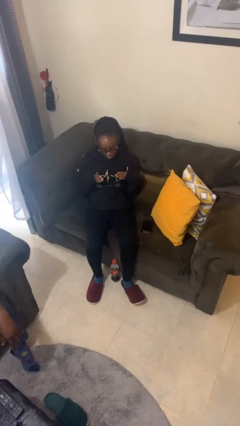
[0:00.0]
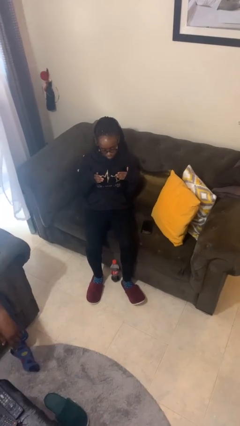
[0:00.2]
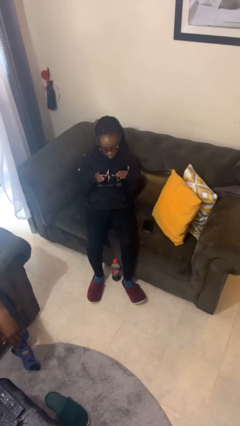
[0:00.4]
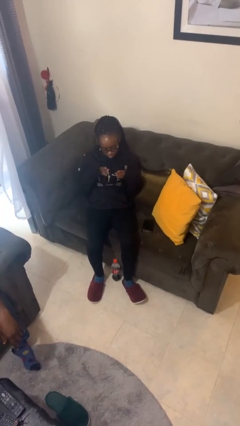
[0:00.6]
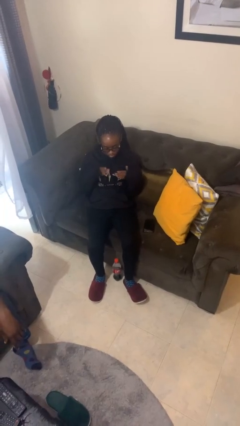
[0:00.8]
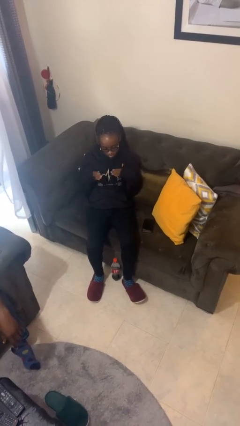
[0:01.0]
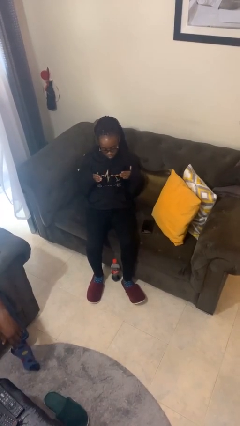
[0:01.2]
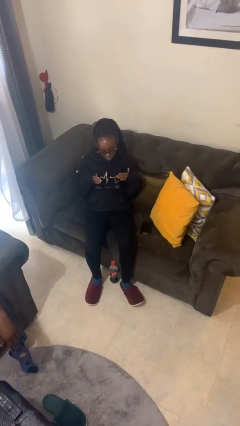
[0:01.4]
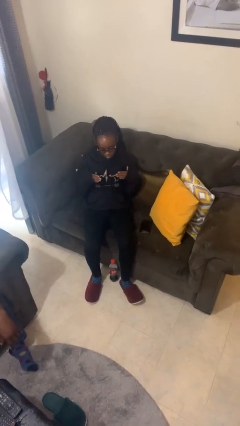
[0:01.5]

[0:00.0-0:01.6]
person drums on chest

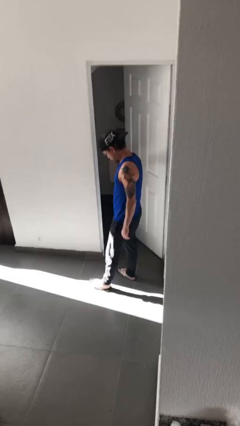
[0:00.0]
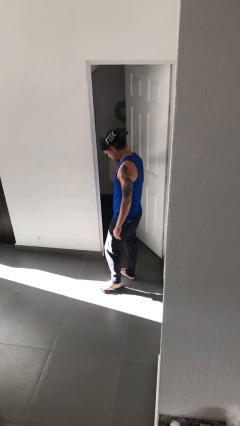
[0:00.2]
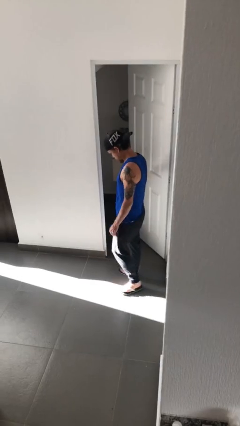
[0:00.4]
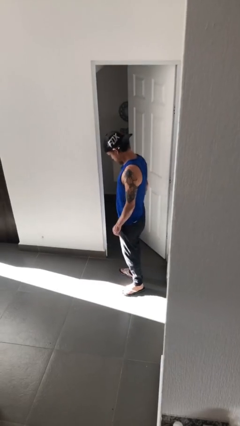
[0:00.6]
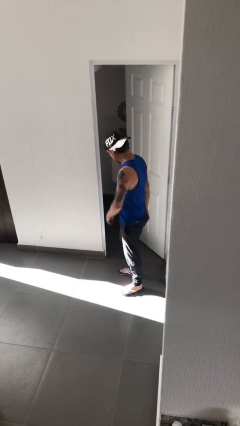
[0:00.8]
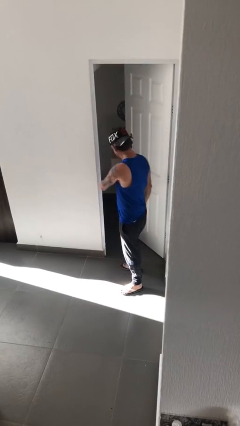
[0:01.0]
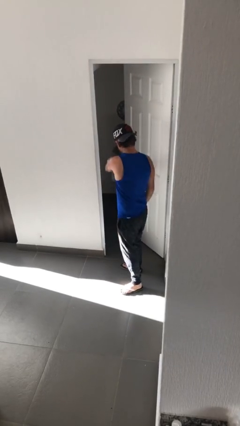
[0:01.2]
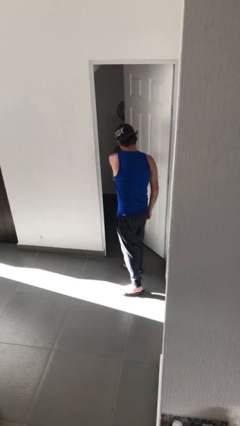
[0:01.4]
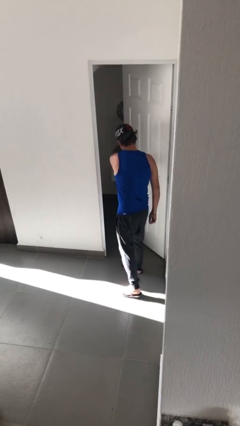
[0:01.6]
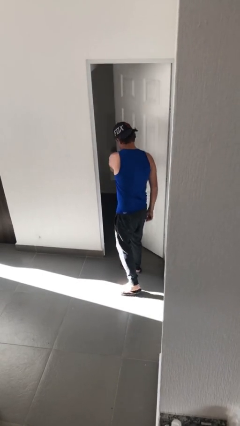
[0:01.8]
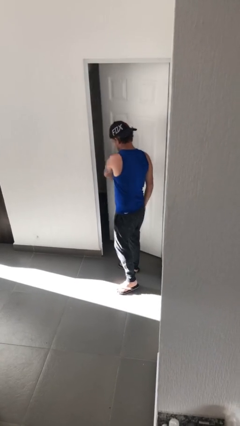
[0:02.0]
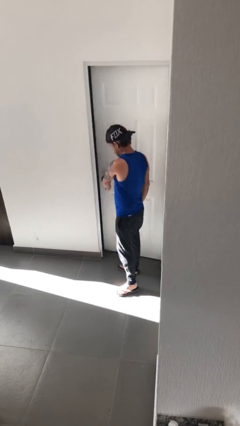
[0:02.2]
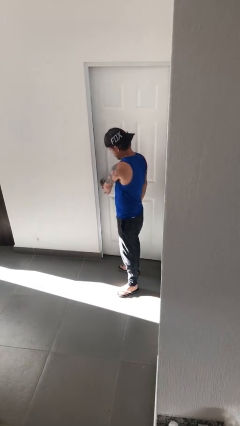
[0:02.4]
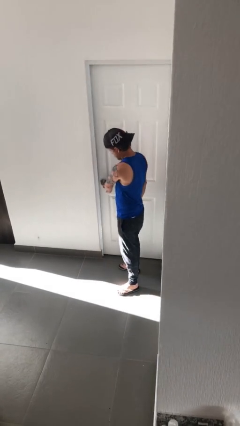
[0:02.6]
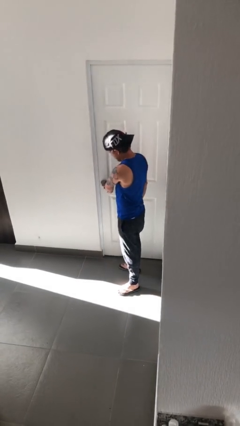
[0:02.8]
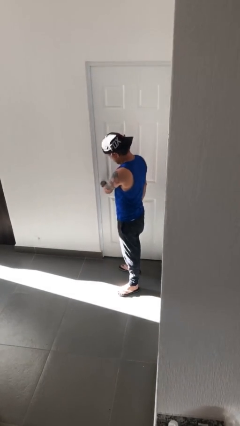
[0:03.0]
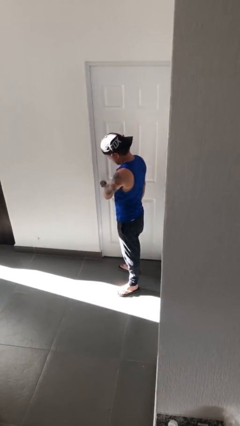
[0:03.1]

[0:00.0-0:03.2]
person closes facility door

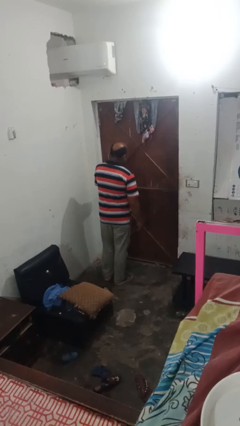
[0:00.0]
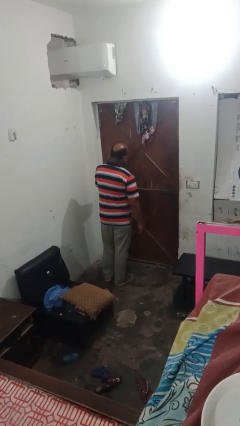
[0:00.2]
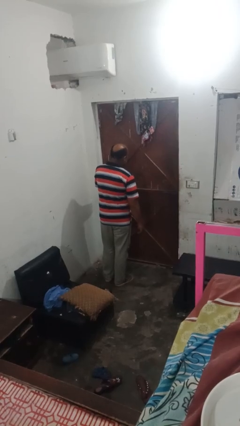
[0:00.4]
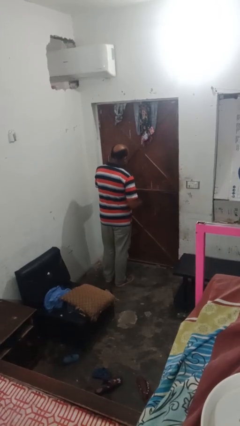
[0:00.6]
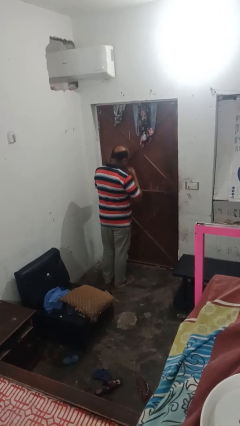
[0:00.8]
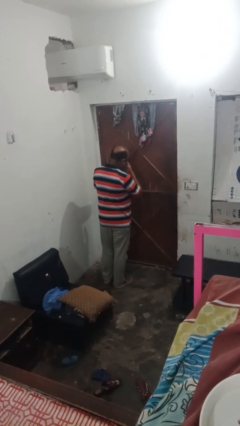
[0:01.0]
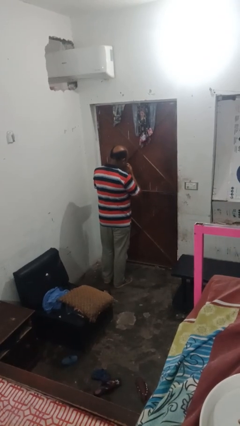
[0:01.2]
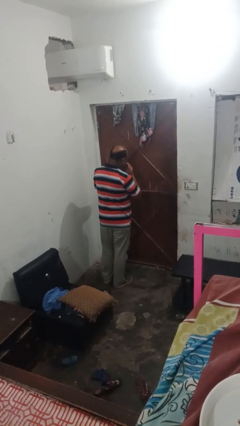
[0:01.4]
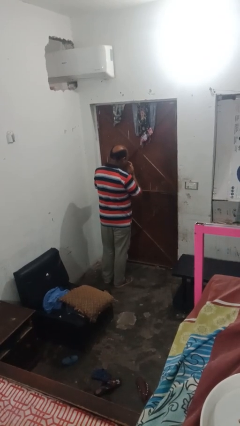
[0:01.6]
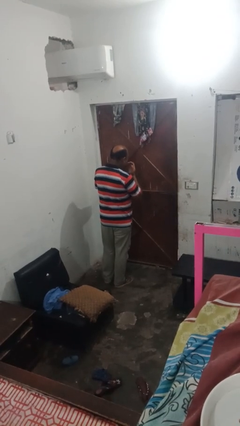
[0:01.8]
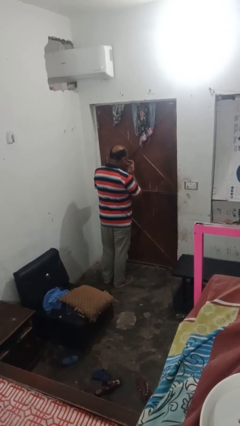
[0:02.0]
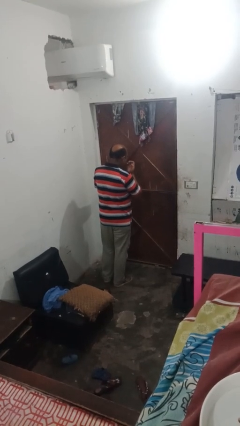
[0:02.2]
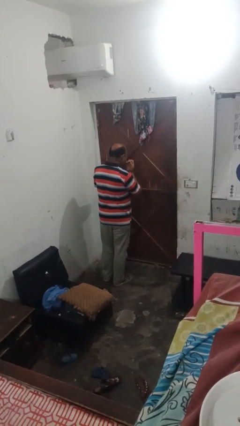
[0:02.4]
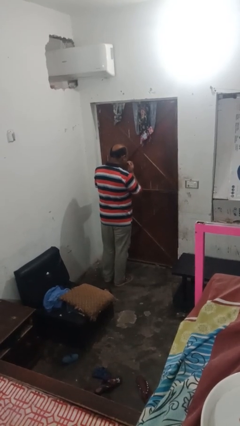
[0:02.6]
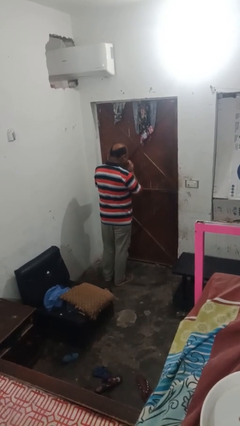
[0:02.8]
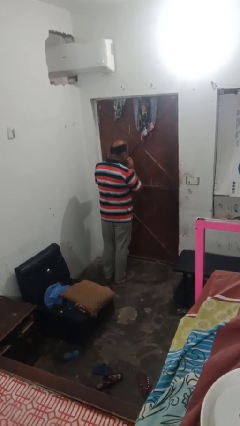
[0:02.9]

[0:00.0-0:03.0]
person licks fingers

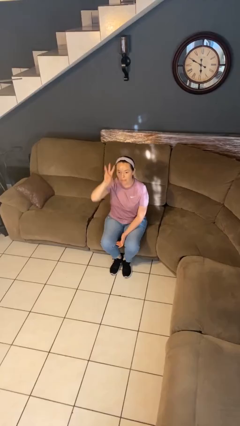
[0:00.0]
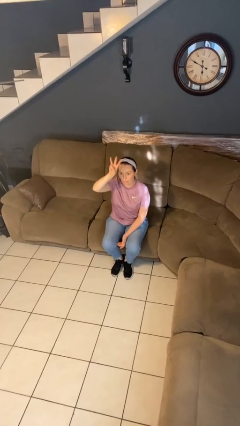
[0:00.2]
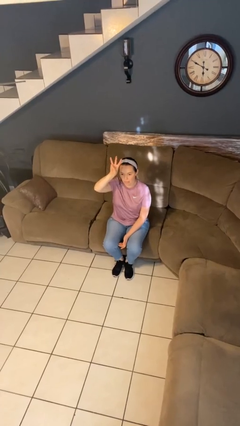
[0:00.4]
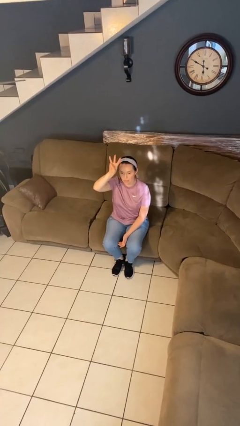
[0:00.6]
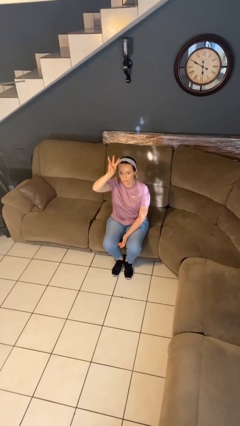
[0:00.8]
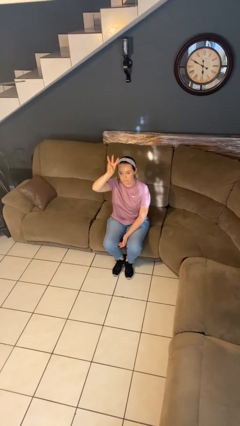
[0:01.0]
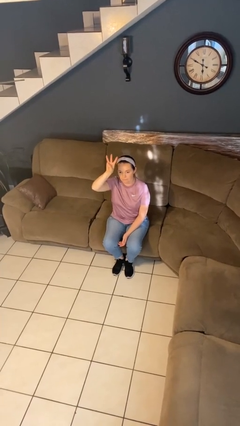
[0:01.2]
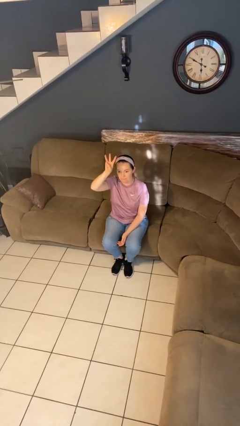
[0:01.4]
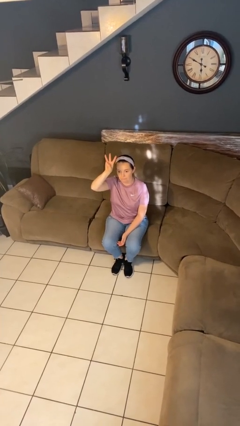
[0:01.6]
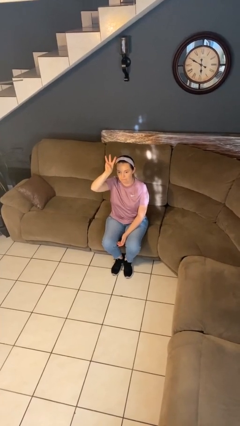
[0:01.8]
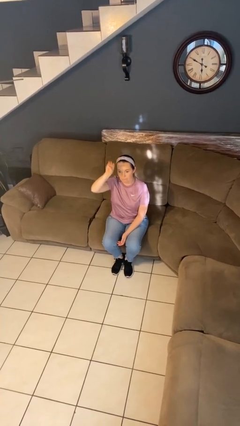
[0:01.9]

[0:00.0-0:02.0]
person gestures number three

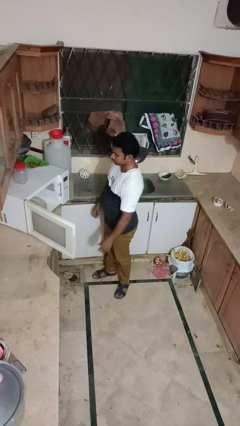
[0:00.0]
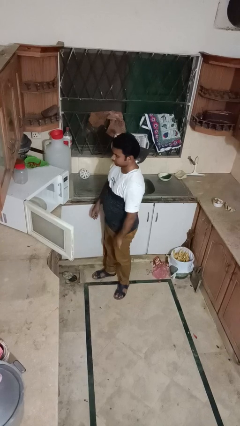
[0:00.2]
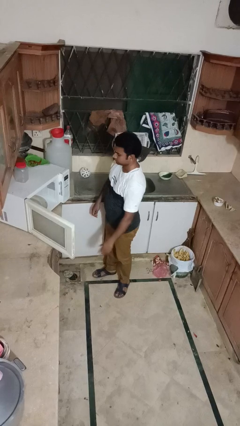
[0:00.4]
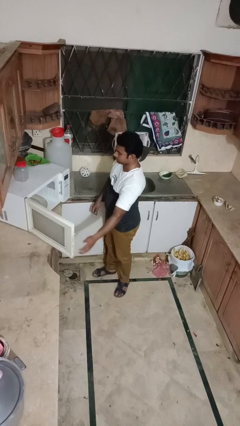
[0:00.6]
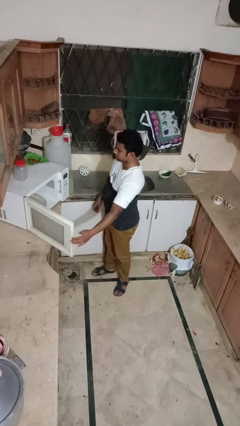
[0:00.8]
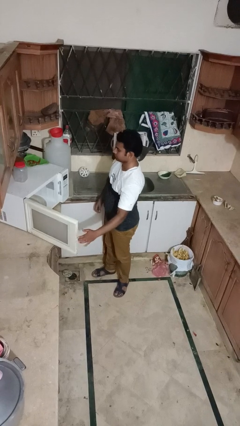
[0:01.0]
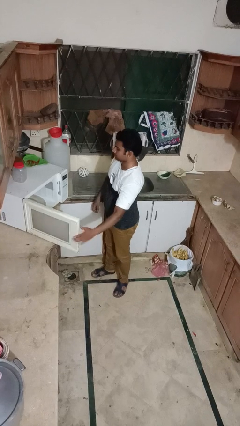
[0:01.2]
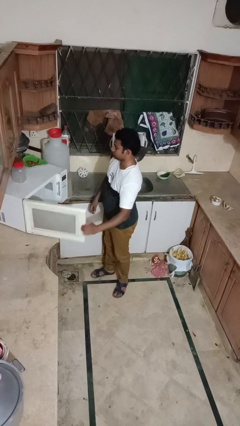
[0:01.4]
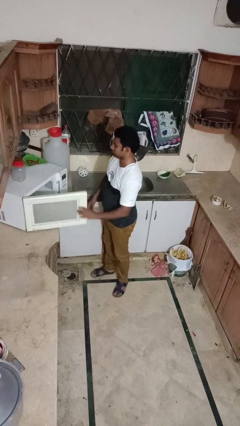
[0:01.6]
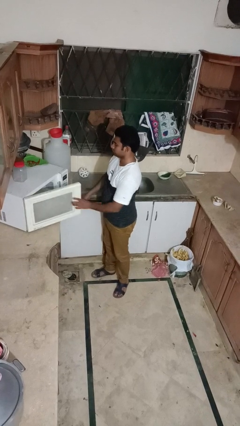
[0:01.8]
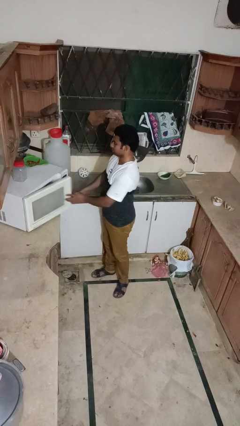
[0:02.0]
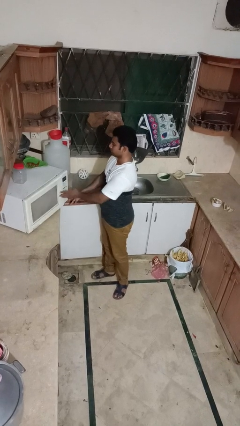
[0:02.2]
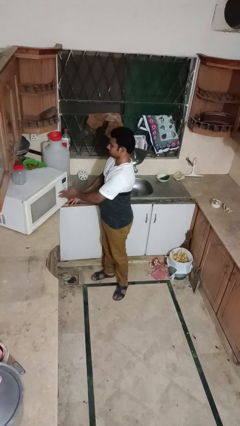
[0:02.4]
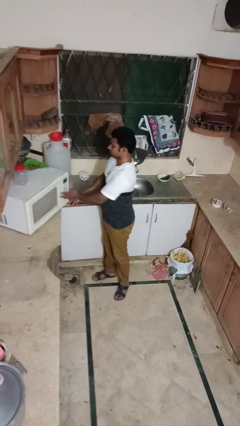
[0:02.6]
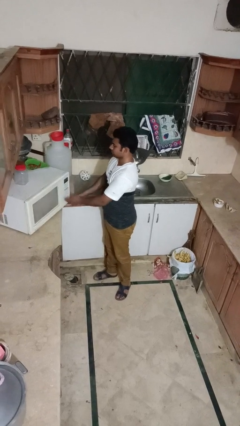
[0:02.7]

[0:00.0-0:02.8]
person closes oven door

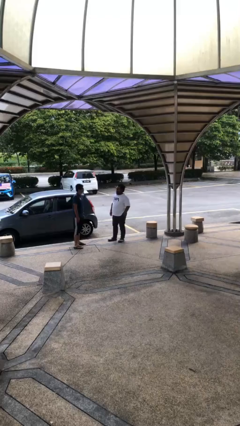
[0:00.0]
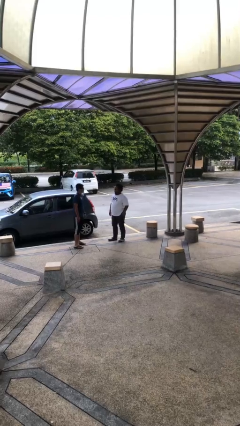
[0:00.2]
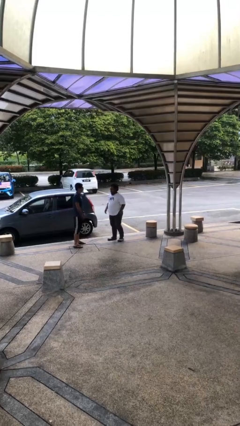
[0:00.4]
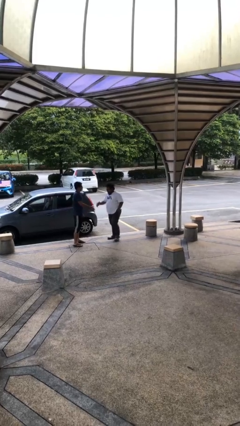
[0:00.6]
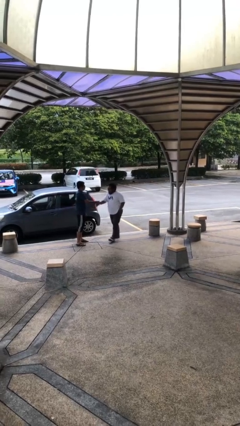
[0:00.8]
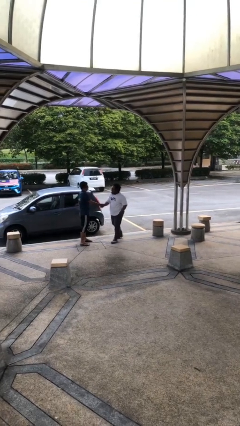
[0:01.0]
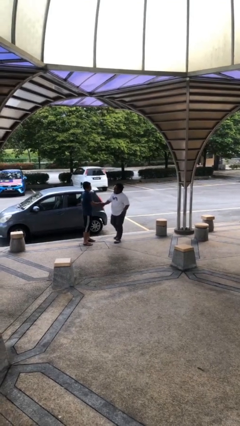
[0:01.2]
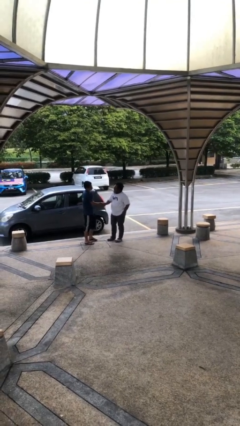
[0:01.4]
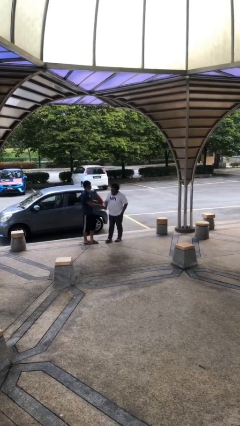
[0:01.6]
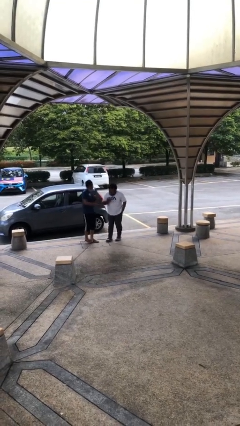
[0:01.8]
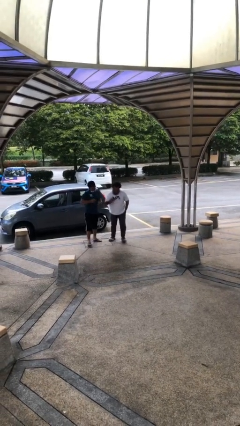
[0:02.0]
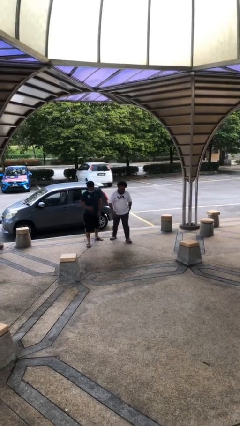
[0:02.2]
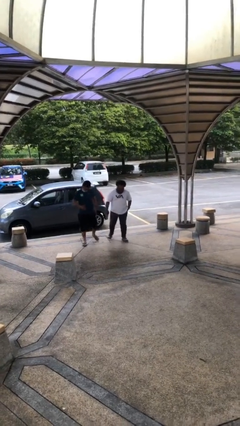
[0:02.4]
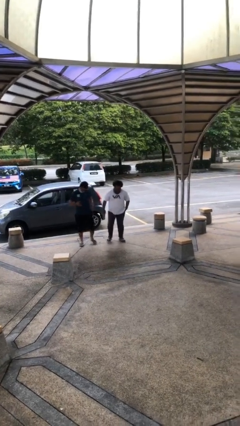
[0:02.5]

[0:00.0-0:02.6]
person shakes hand

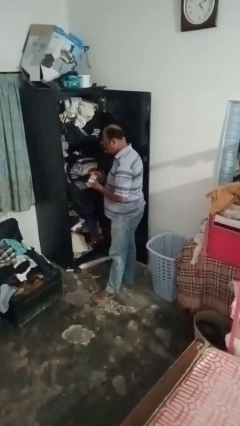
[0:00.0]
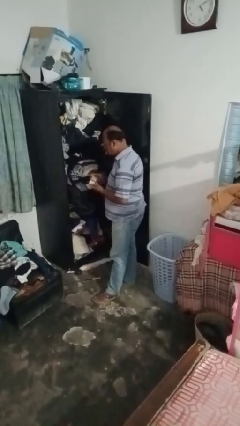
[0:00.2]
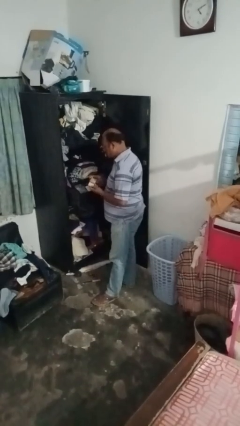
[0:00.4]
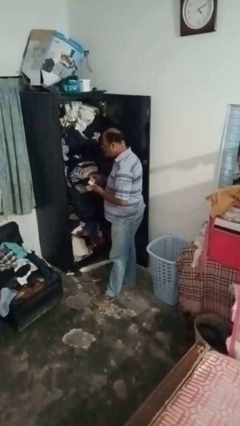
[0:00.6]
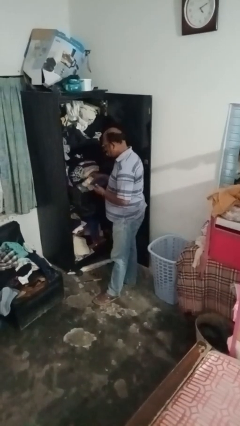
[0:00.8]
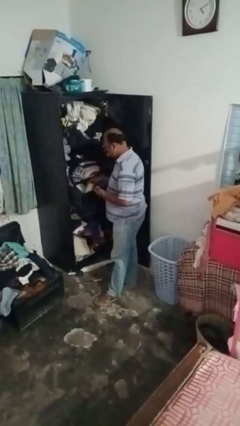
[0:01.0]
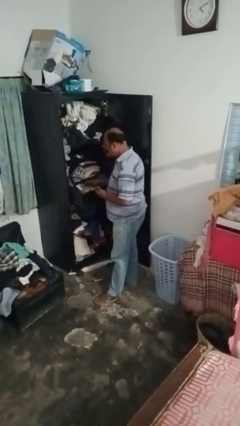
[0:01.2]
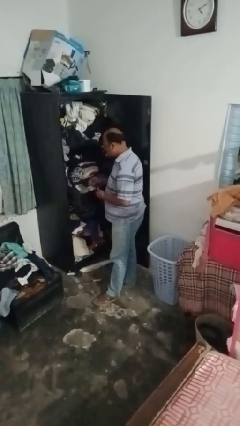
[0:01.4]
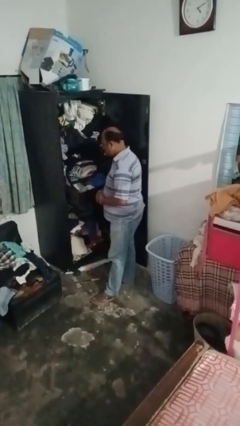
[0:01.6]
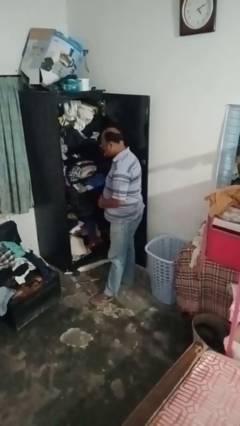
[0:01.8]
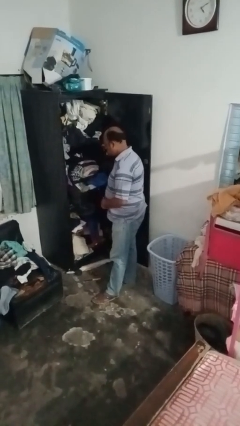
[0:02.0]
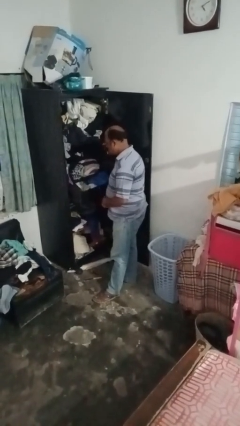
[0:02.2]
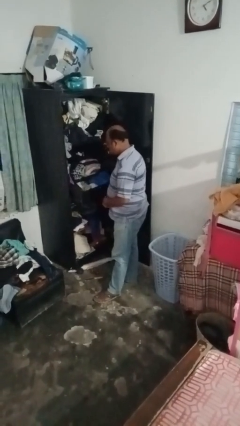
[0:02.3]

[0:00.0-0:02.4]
person takes clothes from dresser
